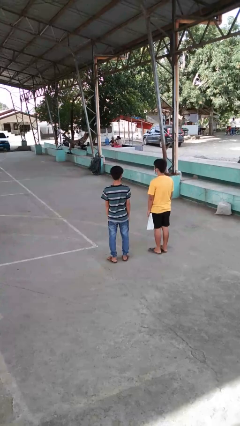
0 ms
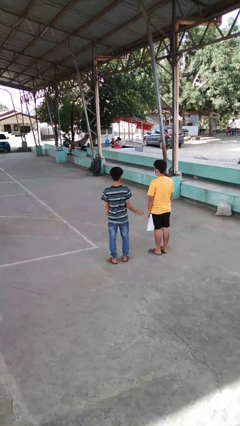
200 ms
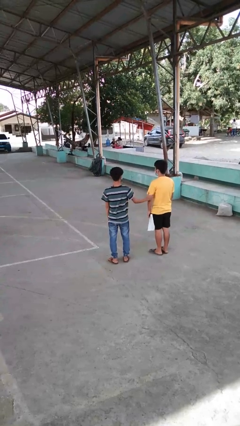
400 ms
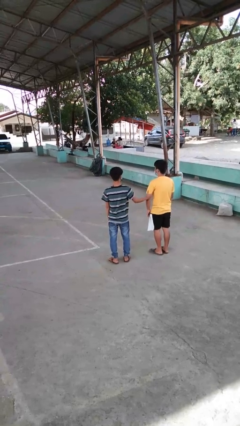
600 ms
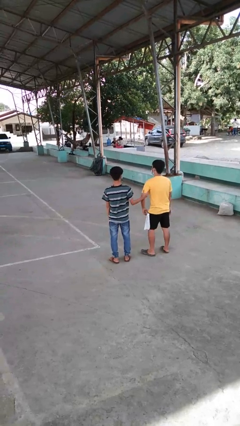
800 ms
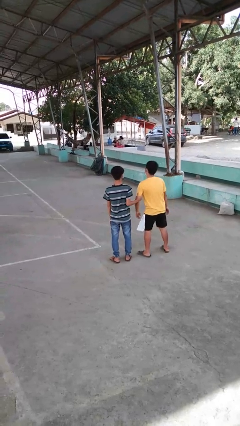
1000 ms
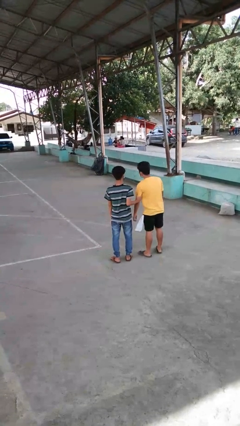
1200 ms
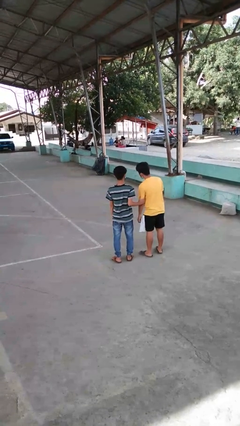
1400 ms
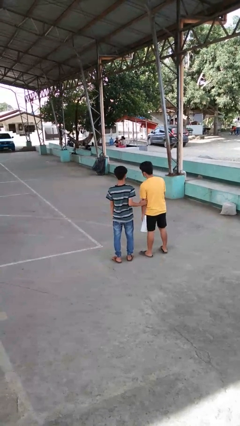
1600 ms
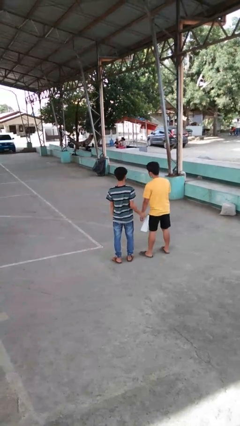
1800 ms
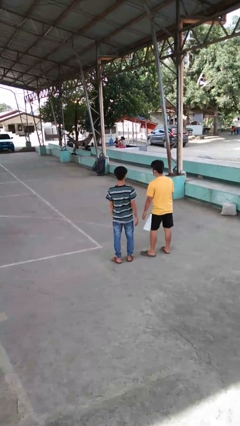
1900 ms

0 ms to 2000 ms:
person grabs person by bicep

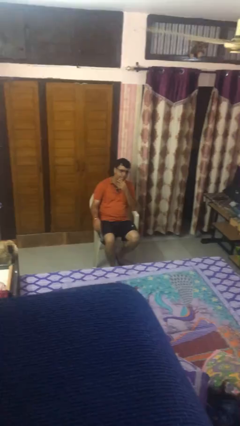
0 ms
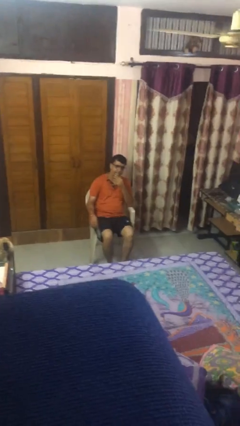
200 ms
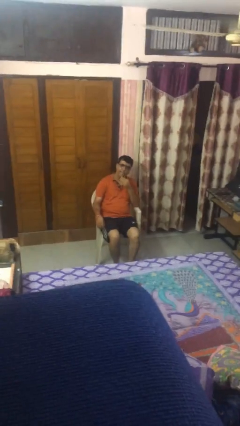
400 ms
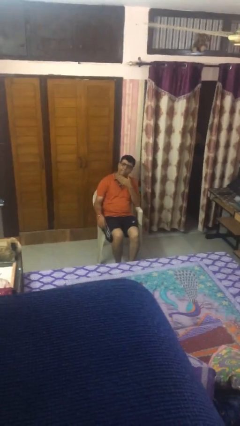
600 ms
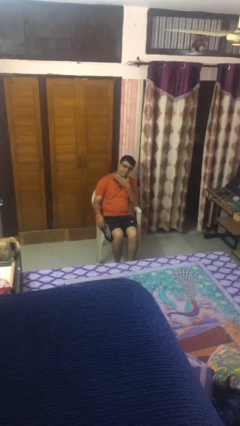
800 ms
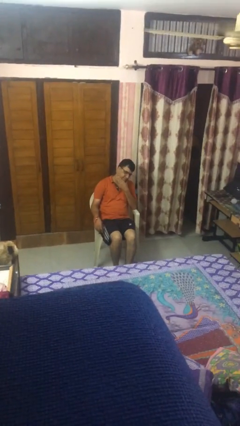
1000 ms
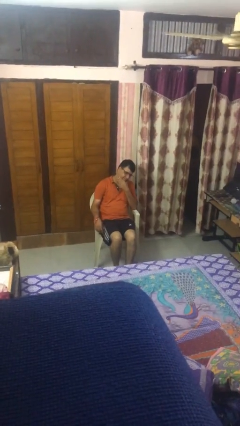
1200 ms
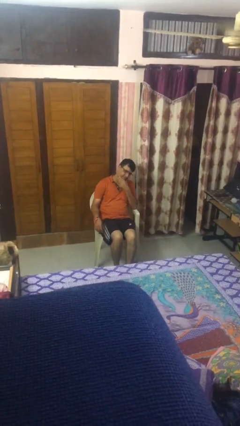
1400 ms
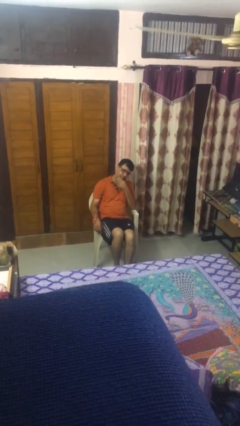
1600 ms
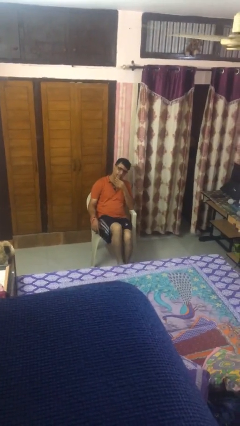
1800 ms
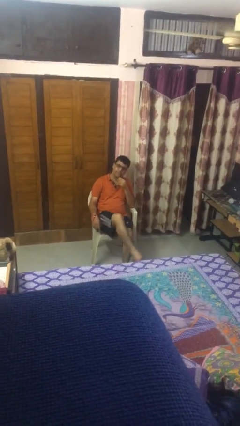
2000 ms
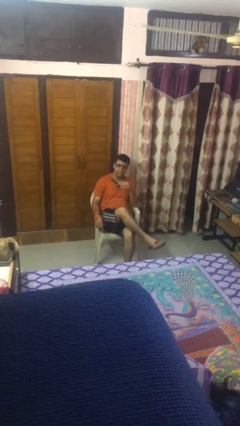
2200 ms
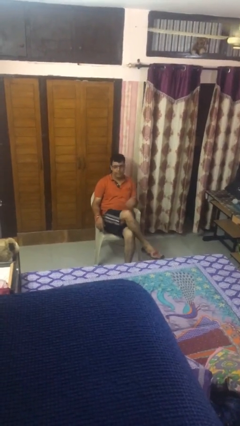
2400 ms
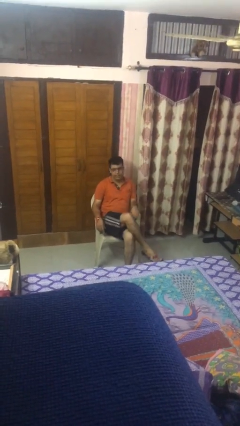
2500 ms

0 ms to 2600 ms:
person strokes chin

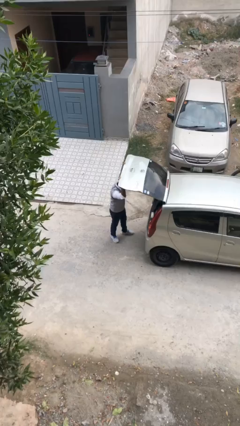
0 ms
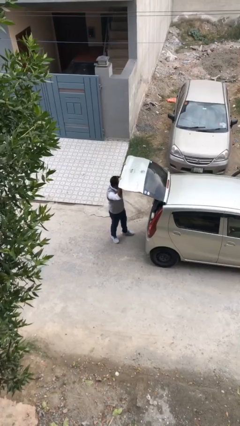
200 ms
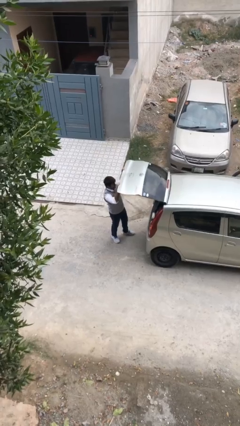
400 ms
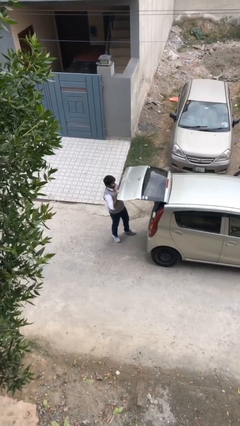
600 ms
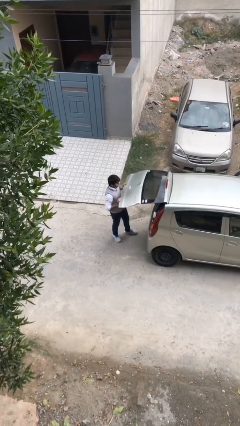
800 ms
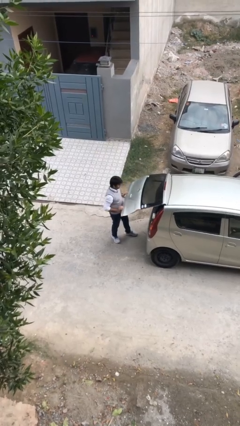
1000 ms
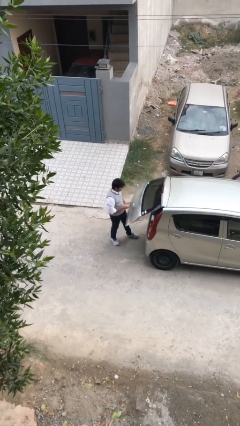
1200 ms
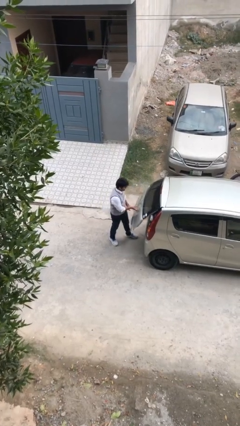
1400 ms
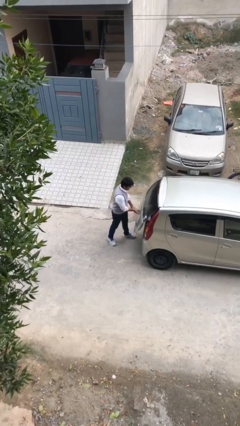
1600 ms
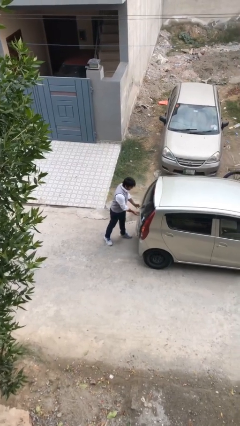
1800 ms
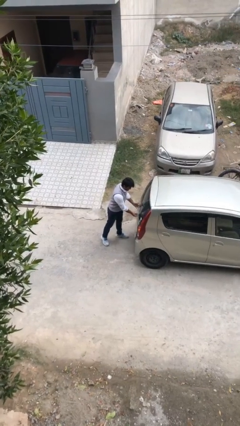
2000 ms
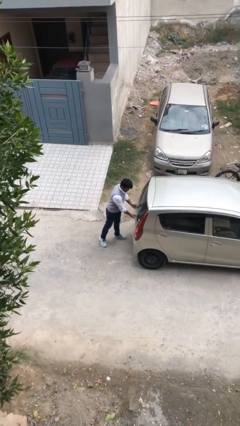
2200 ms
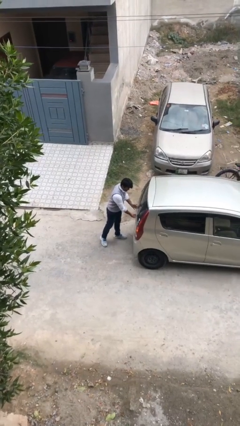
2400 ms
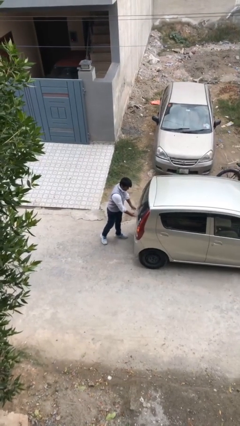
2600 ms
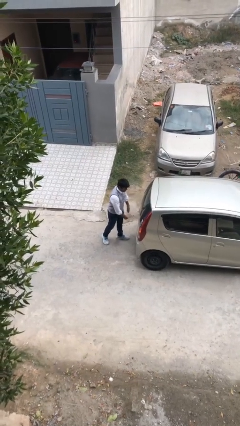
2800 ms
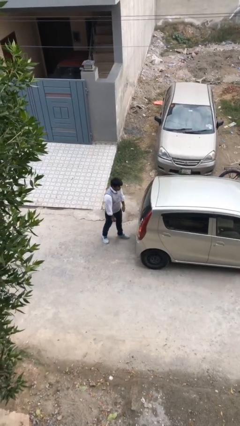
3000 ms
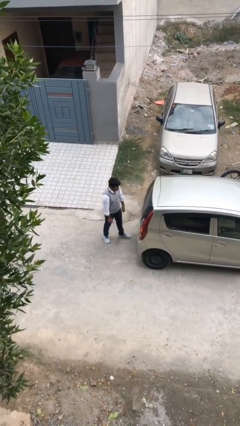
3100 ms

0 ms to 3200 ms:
person closes car trunk

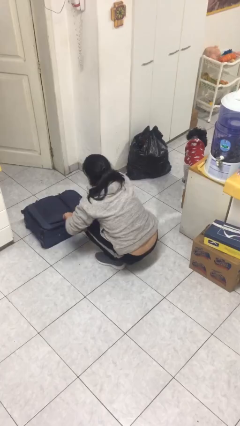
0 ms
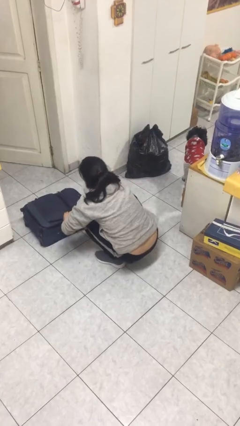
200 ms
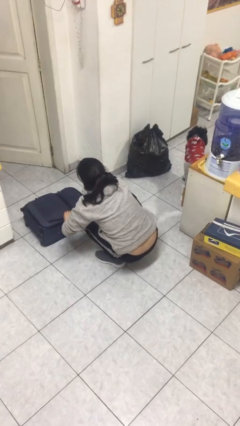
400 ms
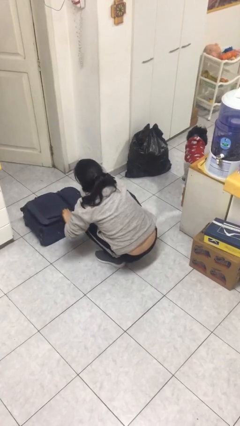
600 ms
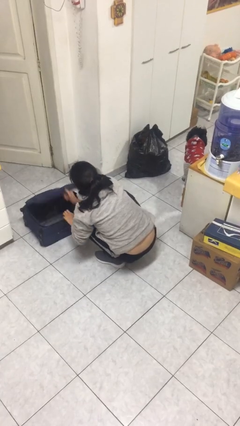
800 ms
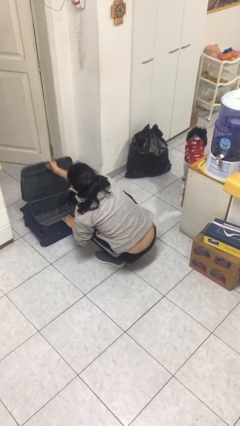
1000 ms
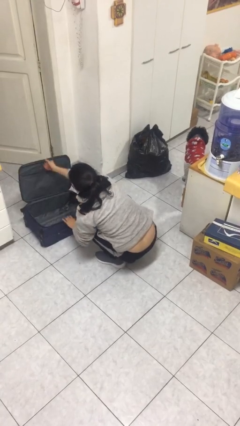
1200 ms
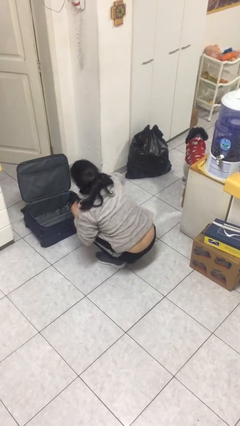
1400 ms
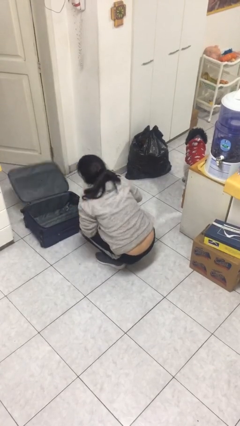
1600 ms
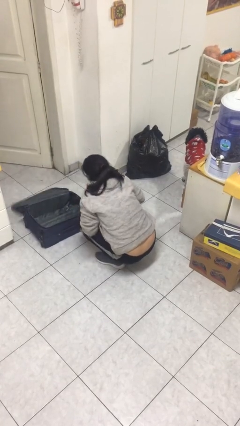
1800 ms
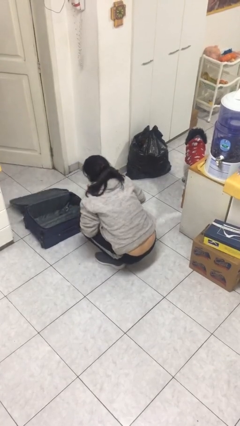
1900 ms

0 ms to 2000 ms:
person opens suitcase

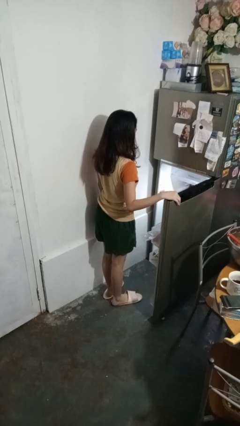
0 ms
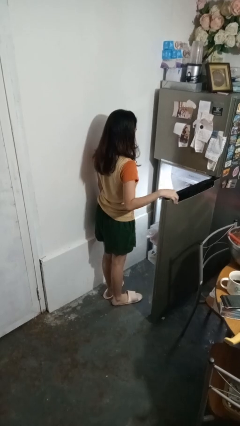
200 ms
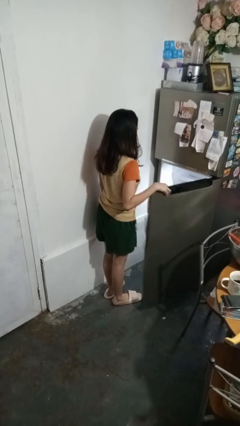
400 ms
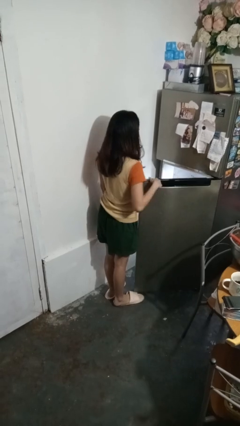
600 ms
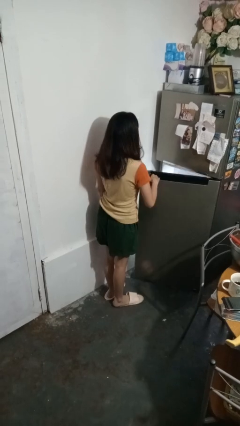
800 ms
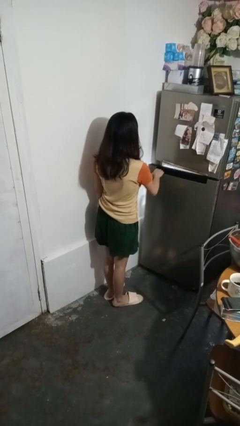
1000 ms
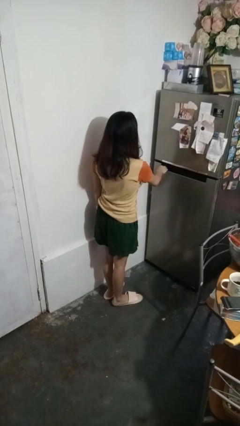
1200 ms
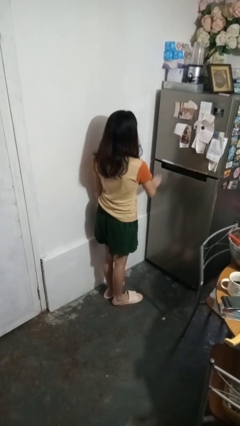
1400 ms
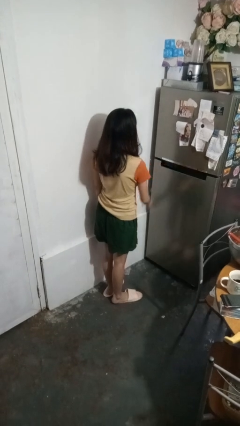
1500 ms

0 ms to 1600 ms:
person closes refrigerator

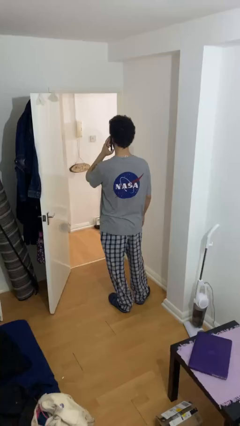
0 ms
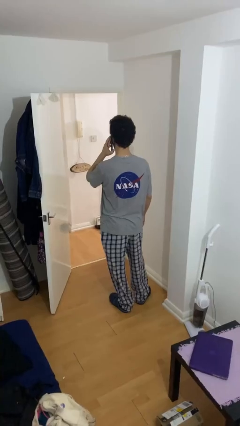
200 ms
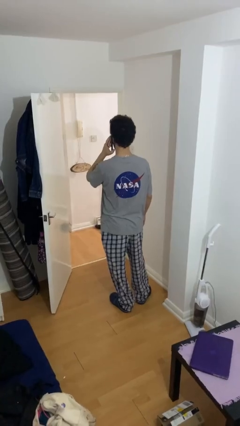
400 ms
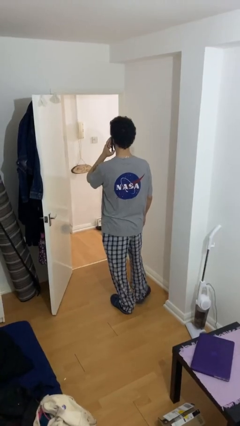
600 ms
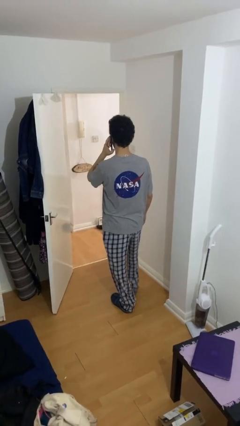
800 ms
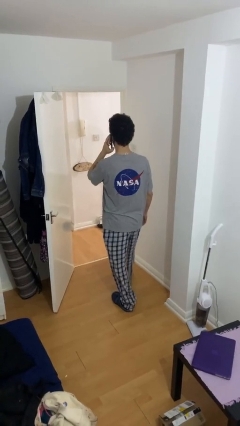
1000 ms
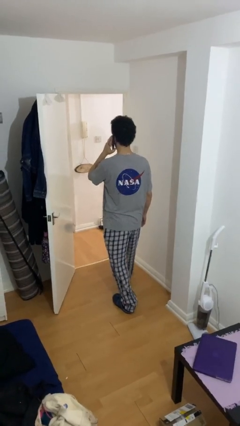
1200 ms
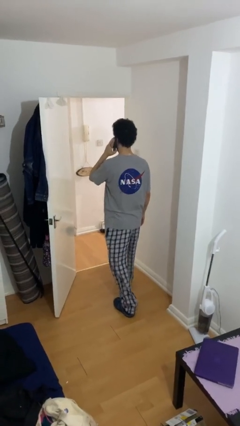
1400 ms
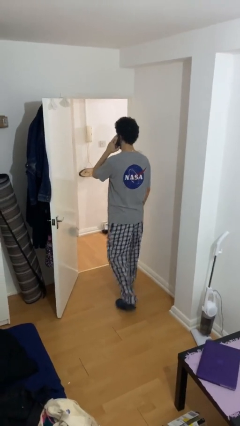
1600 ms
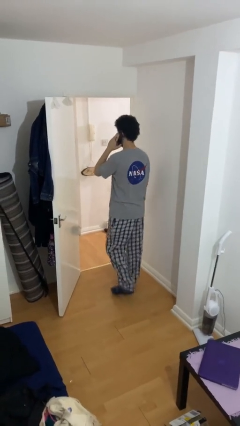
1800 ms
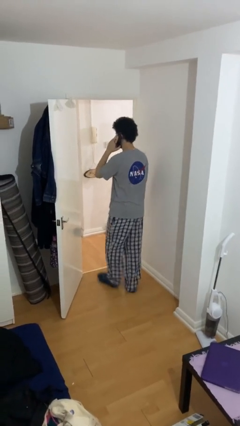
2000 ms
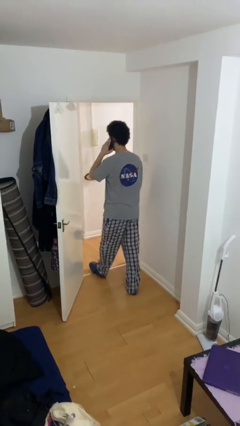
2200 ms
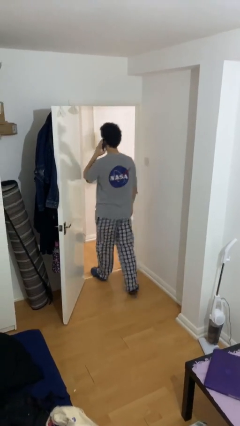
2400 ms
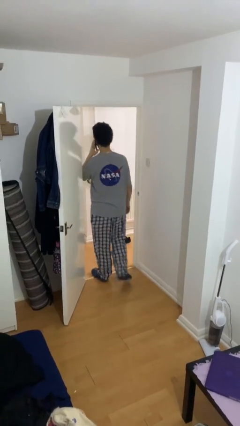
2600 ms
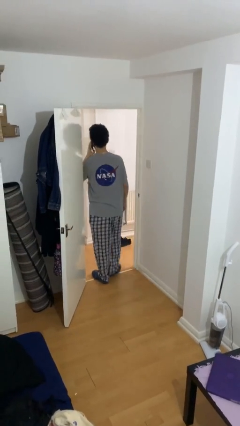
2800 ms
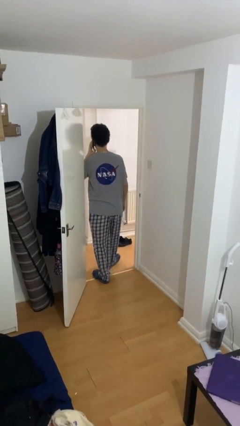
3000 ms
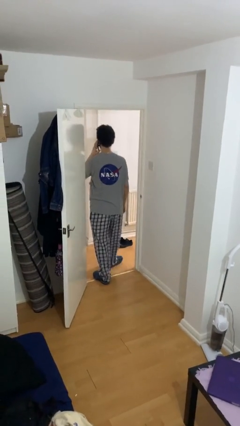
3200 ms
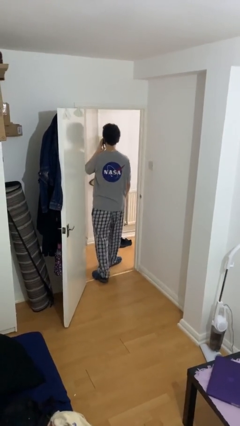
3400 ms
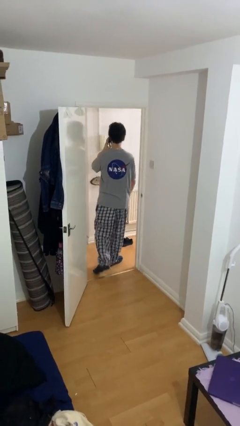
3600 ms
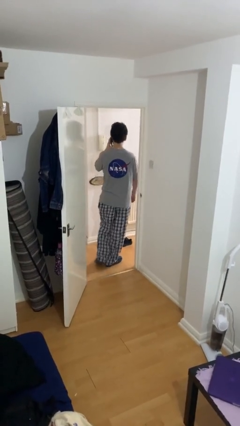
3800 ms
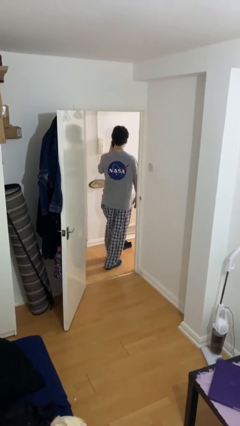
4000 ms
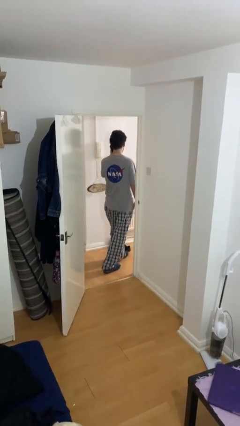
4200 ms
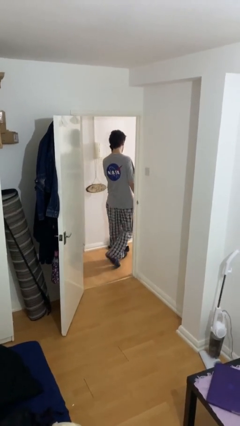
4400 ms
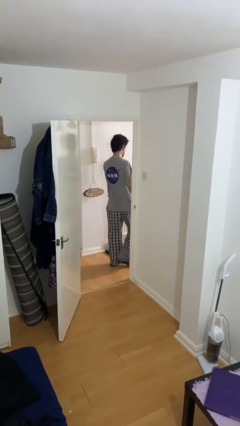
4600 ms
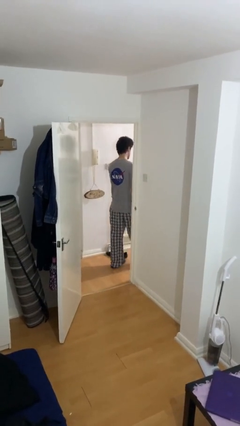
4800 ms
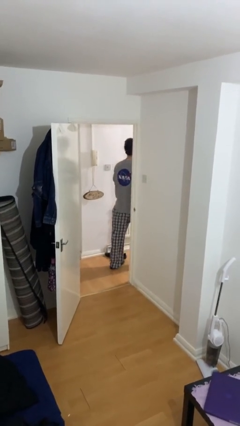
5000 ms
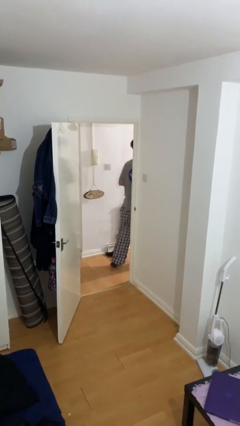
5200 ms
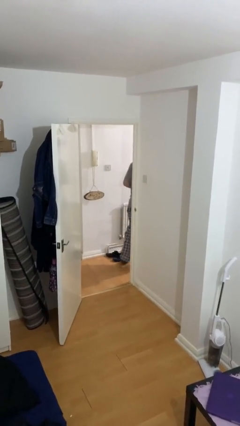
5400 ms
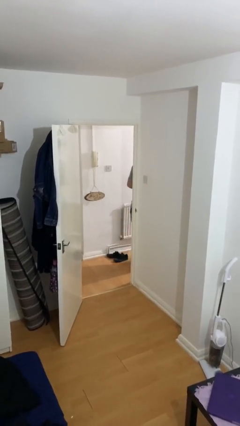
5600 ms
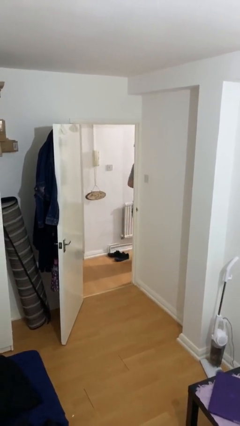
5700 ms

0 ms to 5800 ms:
person exits scene through structure

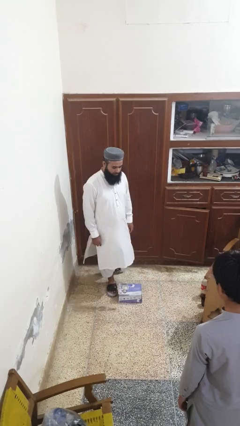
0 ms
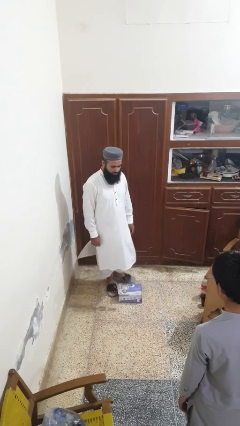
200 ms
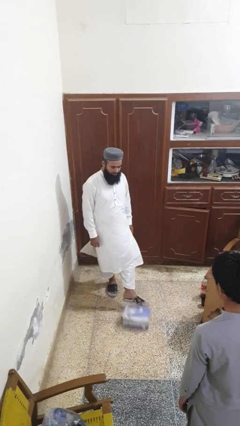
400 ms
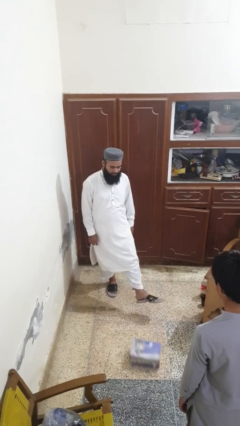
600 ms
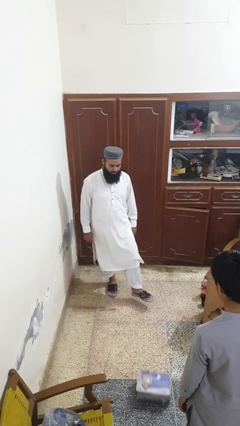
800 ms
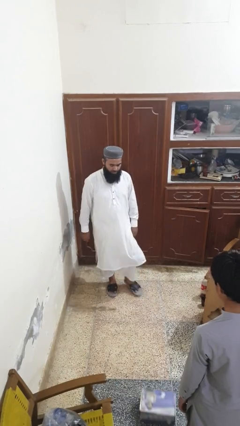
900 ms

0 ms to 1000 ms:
person kicks object to person
